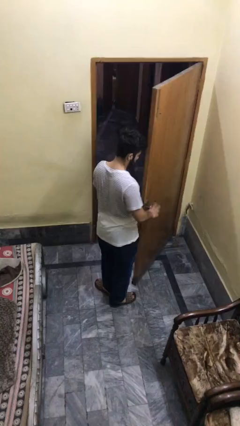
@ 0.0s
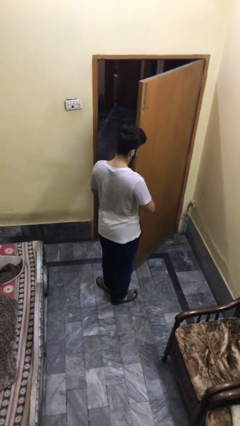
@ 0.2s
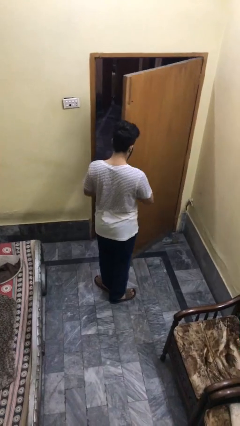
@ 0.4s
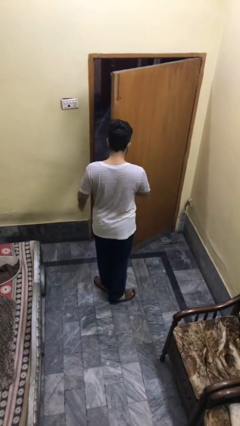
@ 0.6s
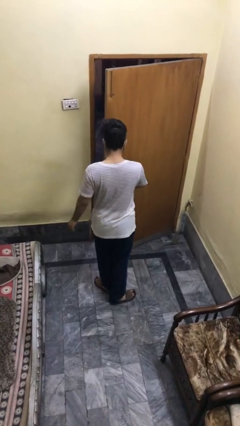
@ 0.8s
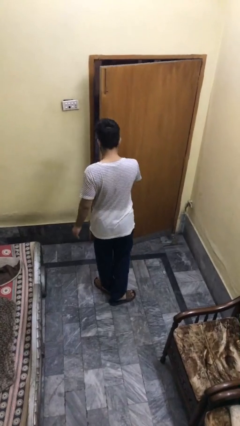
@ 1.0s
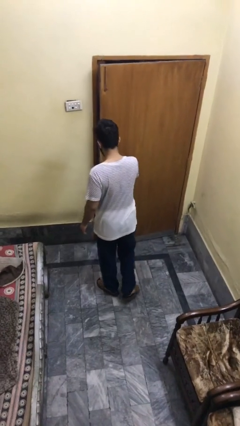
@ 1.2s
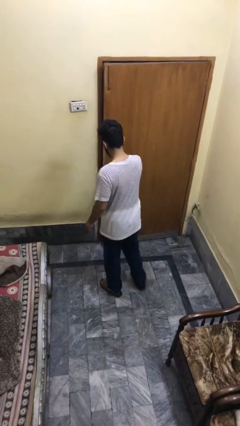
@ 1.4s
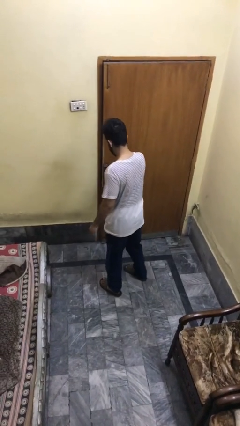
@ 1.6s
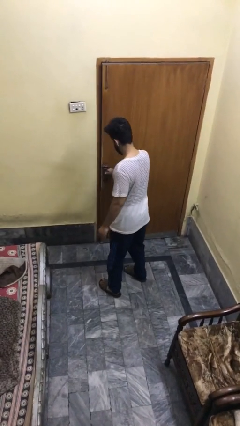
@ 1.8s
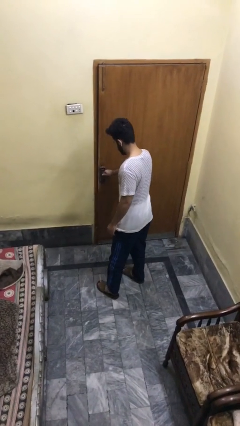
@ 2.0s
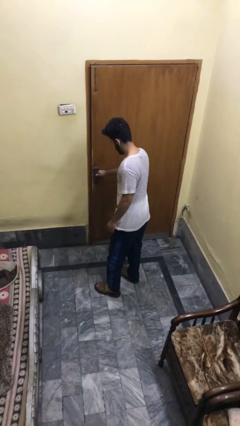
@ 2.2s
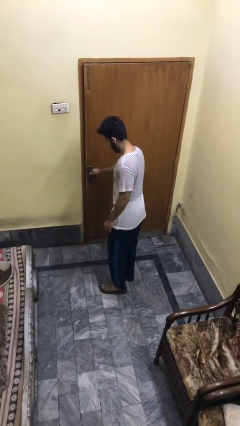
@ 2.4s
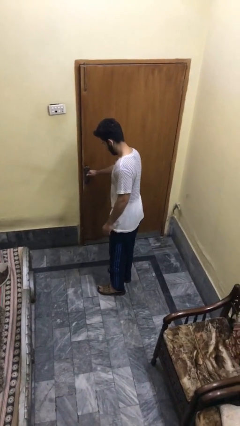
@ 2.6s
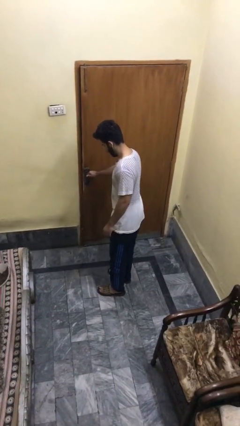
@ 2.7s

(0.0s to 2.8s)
person closes facility door

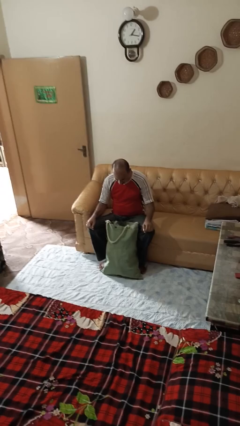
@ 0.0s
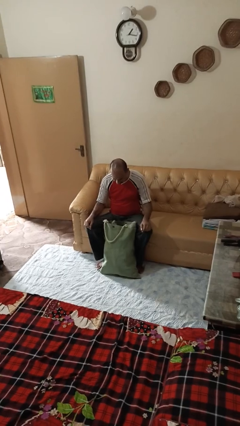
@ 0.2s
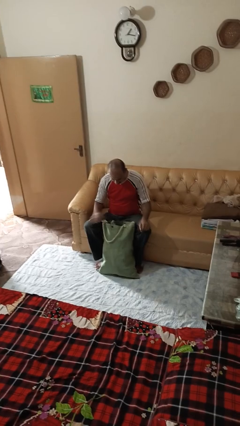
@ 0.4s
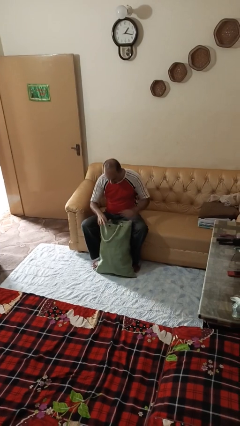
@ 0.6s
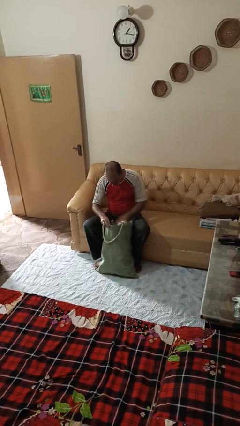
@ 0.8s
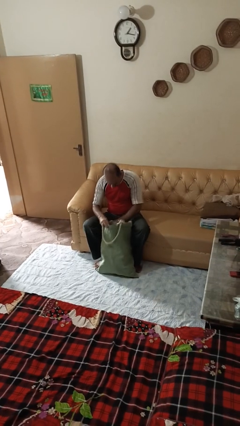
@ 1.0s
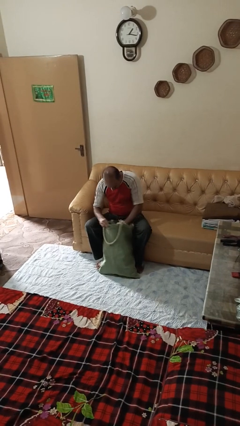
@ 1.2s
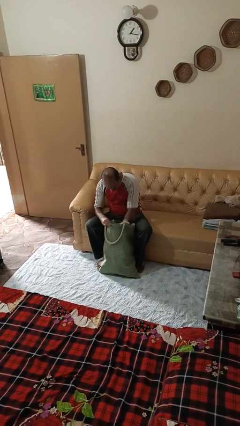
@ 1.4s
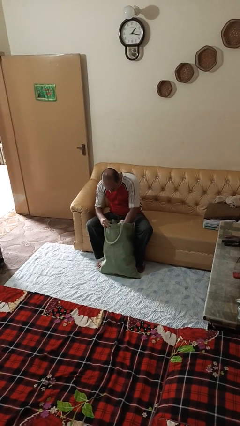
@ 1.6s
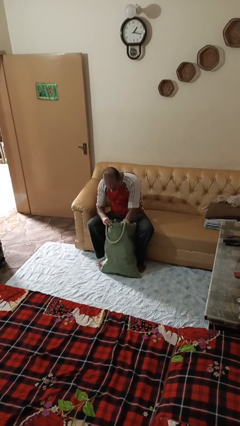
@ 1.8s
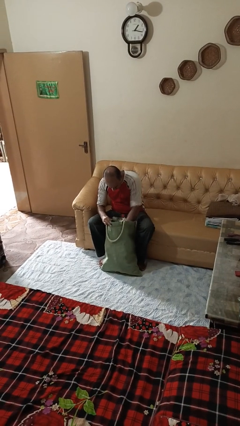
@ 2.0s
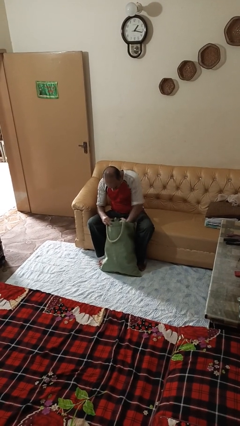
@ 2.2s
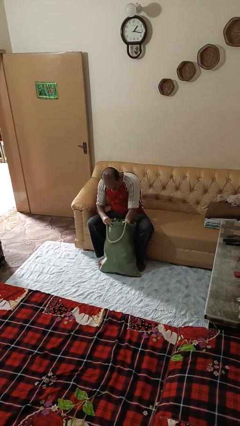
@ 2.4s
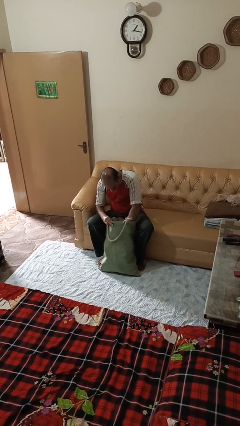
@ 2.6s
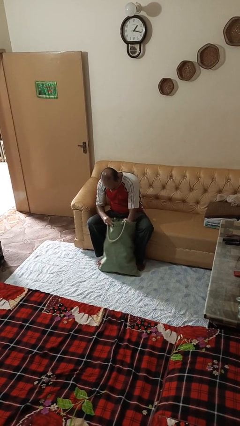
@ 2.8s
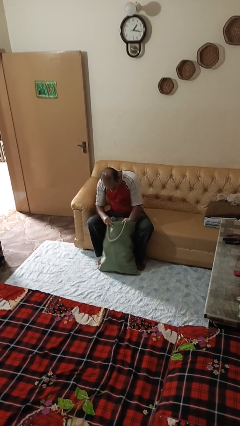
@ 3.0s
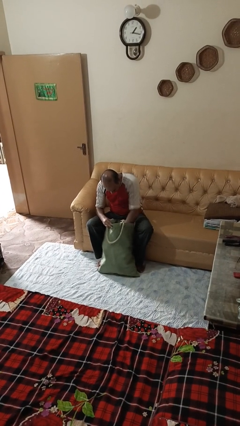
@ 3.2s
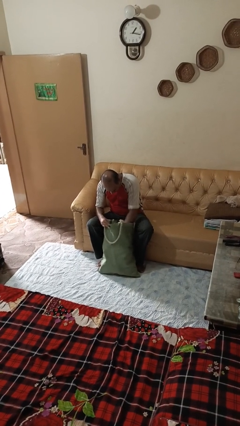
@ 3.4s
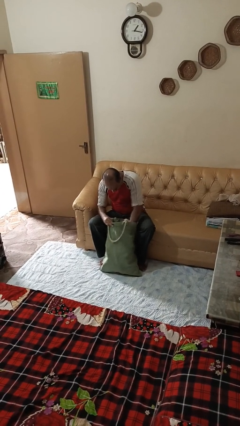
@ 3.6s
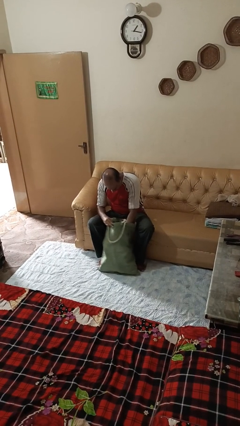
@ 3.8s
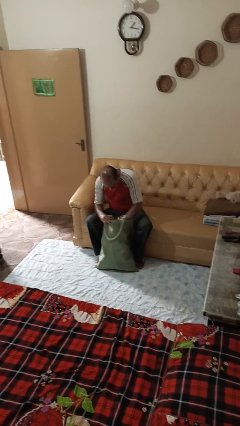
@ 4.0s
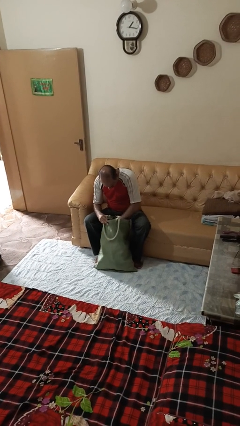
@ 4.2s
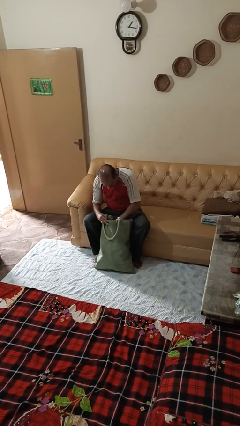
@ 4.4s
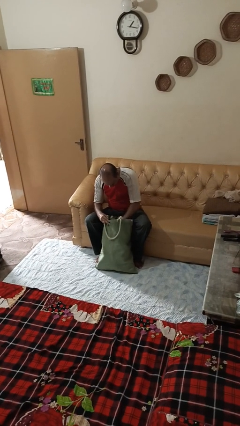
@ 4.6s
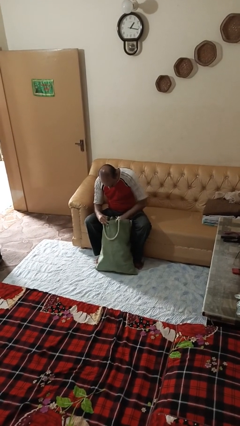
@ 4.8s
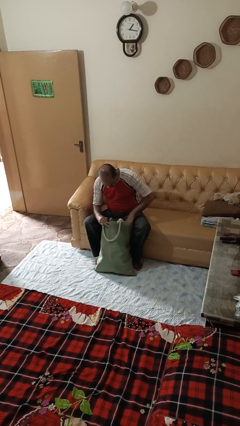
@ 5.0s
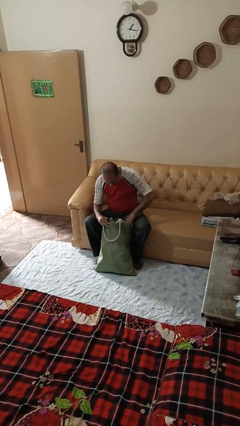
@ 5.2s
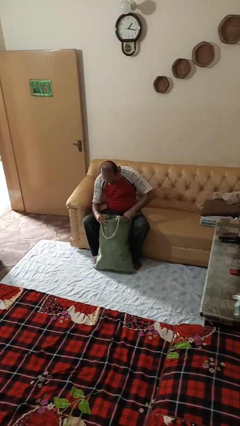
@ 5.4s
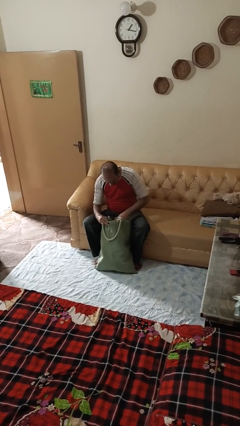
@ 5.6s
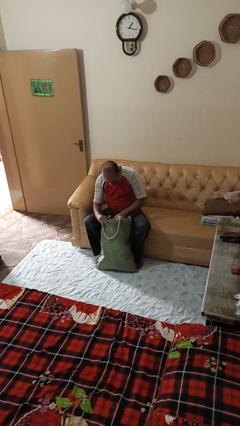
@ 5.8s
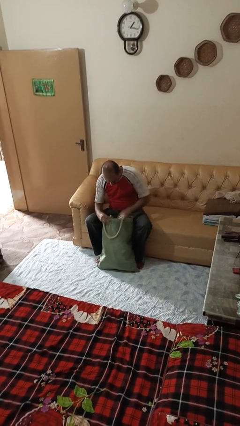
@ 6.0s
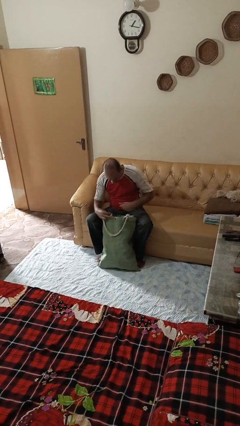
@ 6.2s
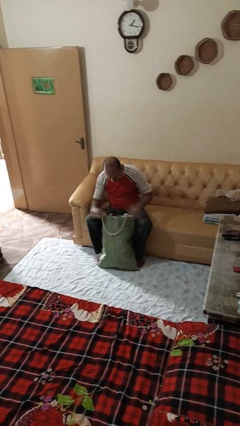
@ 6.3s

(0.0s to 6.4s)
person searches in bag

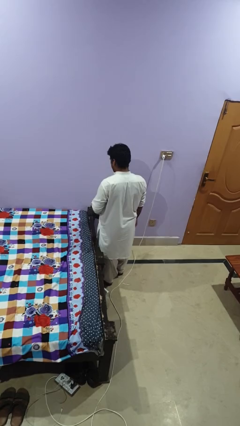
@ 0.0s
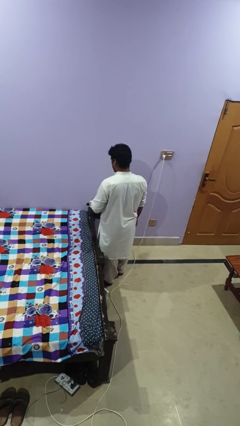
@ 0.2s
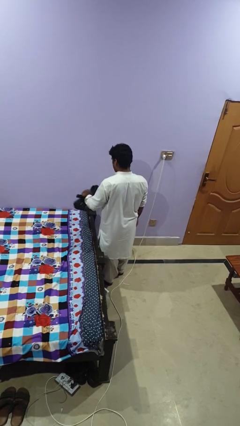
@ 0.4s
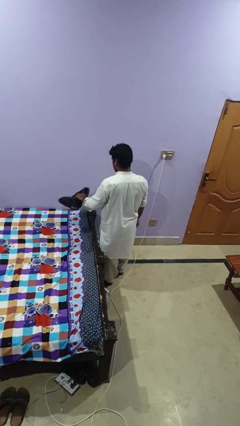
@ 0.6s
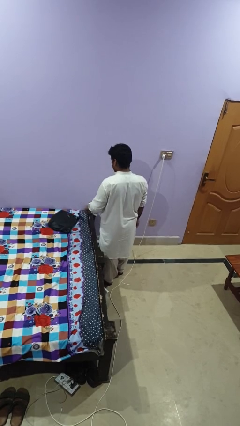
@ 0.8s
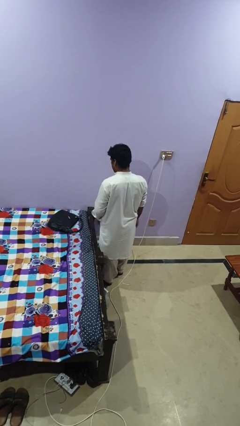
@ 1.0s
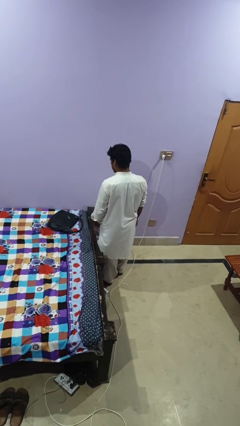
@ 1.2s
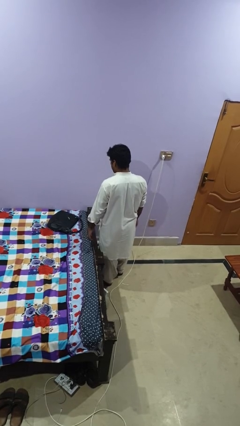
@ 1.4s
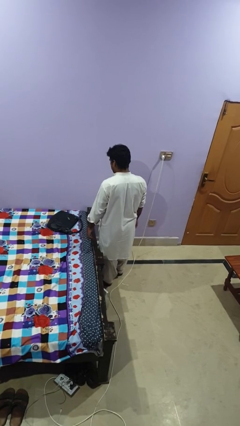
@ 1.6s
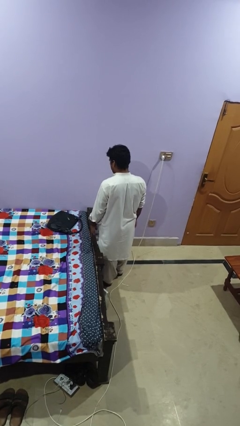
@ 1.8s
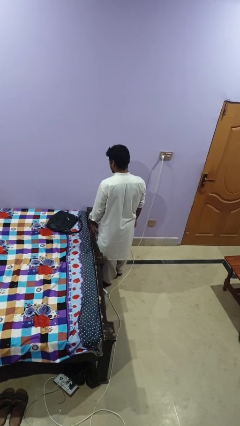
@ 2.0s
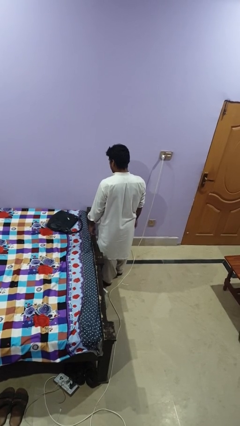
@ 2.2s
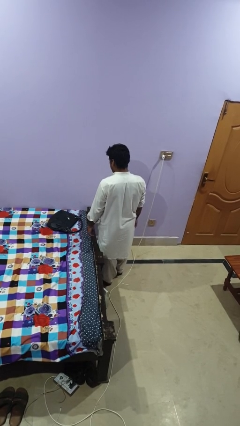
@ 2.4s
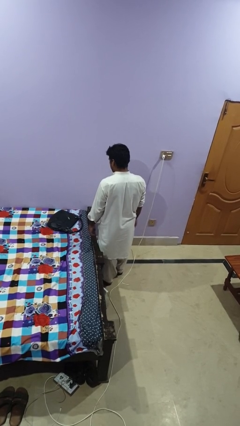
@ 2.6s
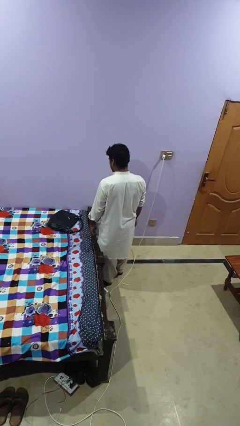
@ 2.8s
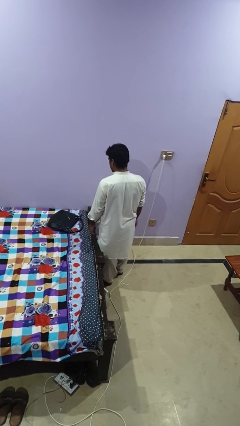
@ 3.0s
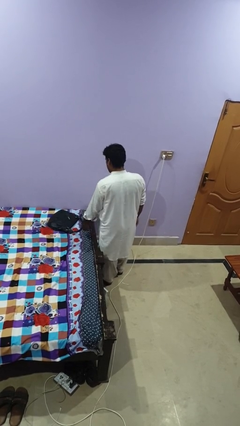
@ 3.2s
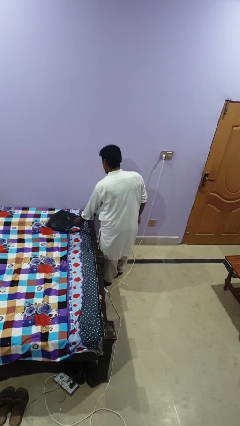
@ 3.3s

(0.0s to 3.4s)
person throws object on bed

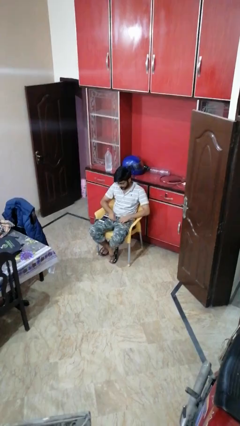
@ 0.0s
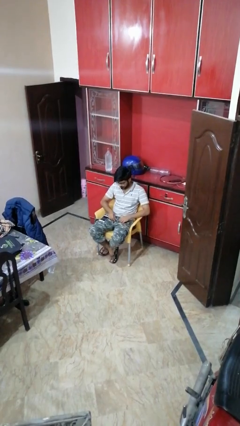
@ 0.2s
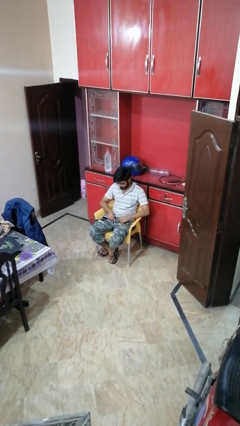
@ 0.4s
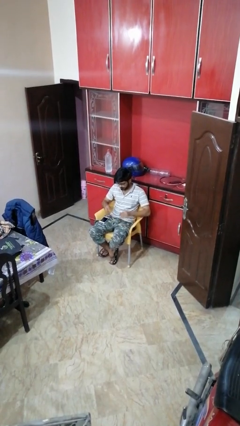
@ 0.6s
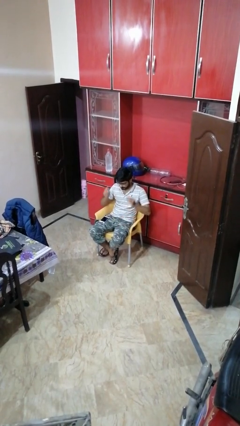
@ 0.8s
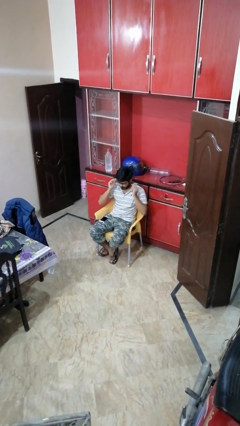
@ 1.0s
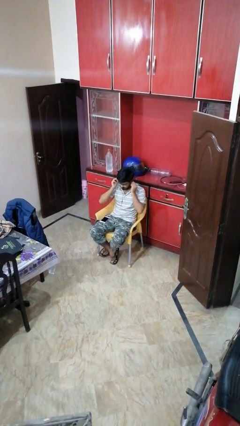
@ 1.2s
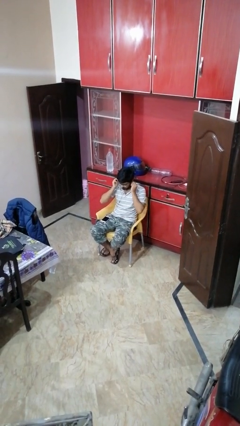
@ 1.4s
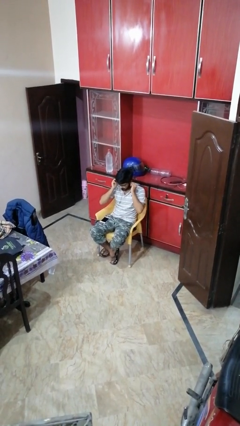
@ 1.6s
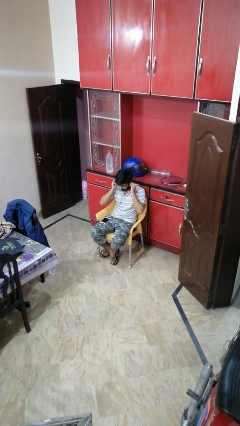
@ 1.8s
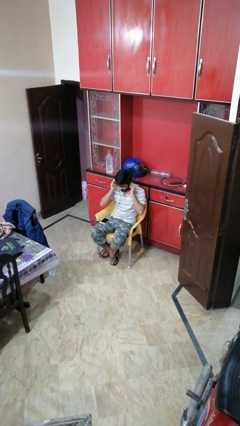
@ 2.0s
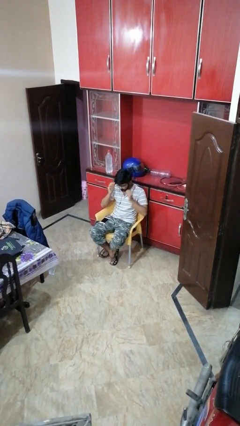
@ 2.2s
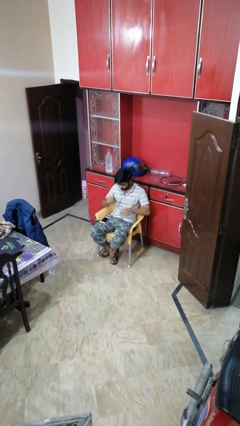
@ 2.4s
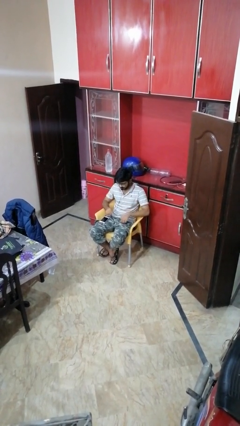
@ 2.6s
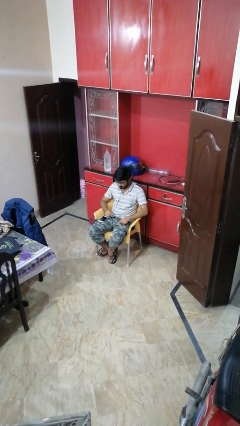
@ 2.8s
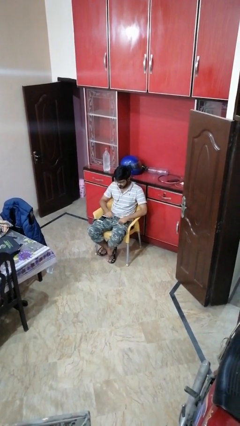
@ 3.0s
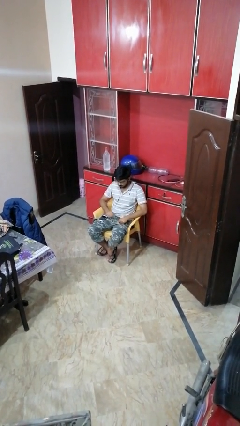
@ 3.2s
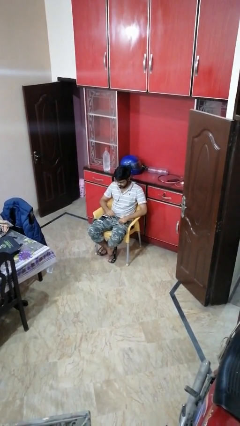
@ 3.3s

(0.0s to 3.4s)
person puts on headphones

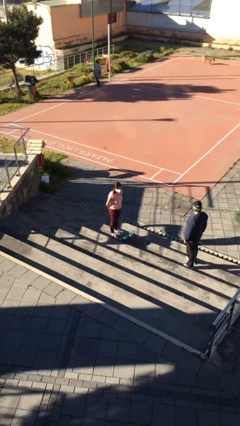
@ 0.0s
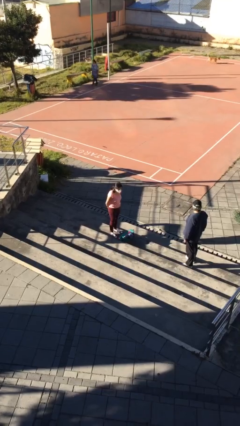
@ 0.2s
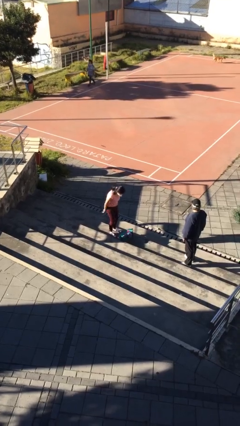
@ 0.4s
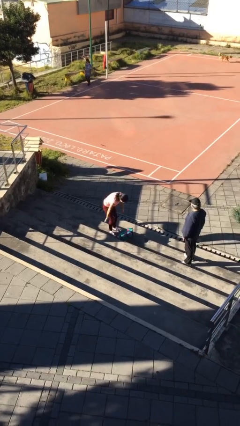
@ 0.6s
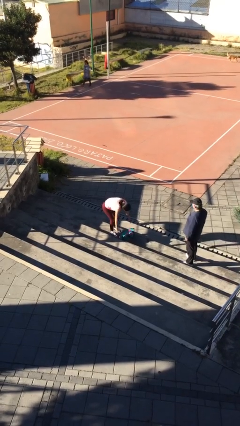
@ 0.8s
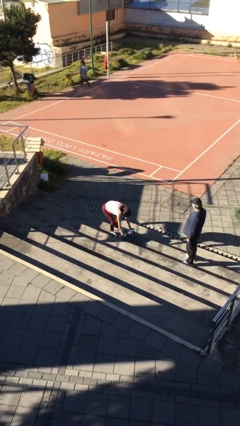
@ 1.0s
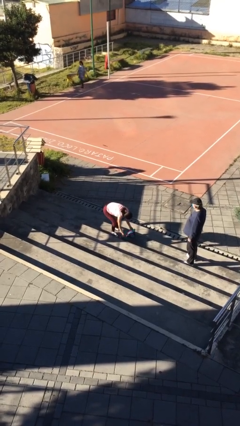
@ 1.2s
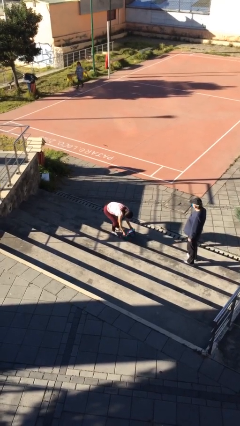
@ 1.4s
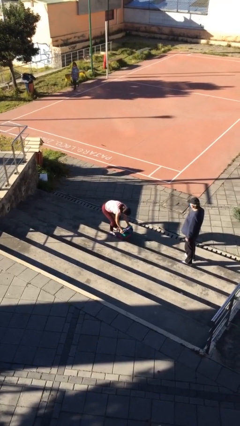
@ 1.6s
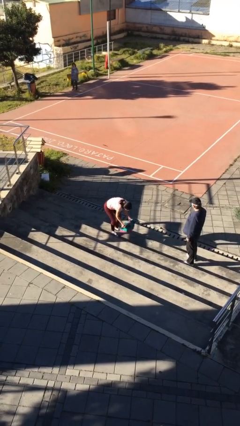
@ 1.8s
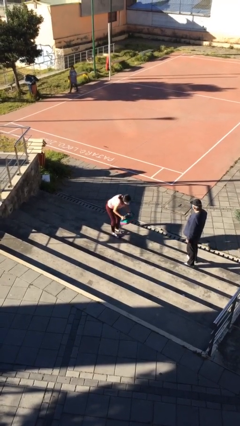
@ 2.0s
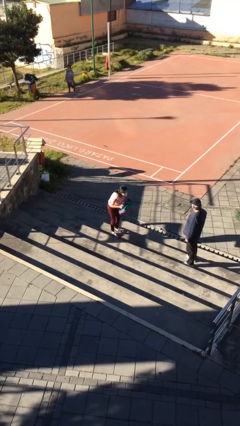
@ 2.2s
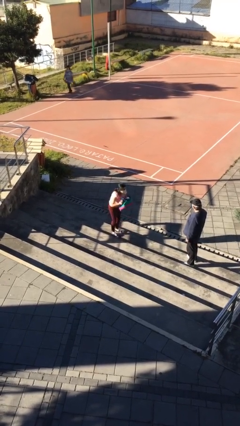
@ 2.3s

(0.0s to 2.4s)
person picks up object from floor
